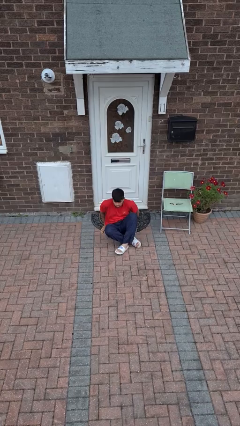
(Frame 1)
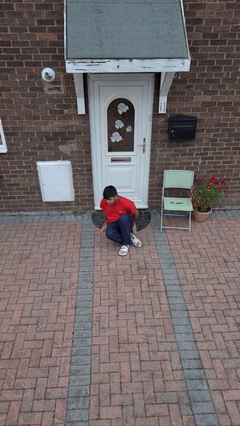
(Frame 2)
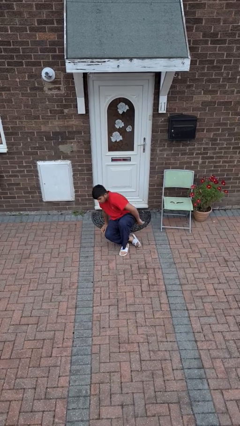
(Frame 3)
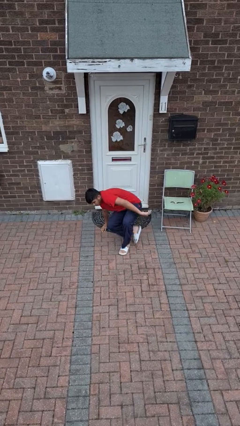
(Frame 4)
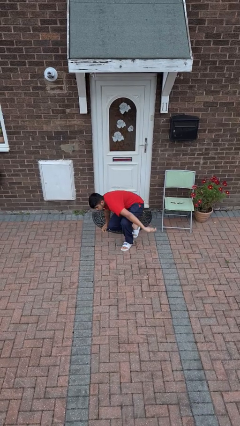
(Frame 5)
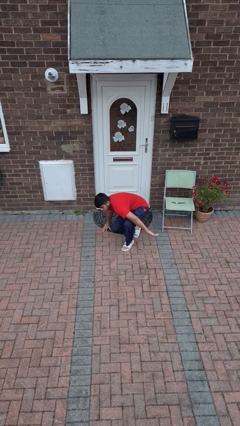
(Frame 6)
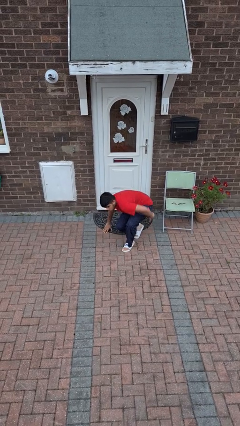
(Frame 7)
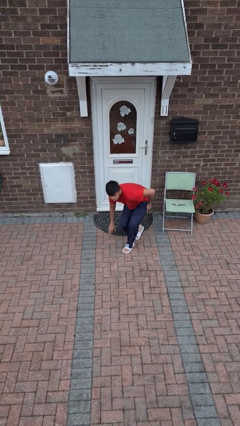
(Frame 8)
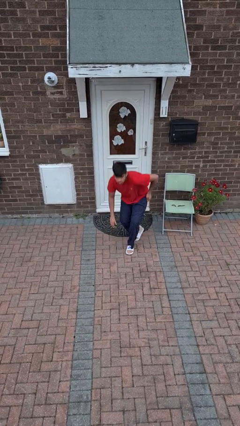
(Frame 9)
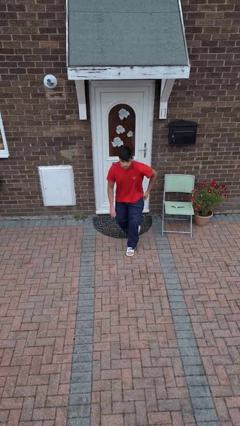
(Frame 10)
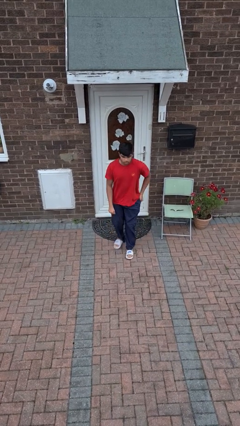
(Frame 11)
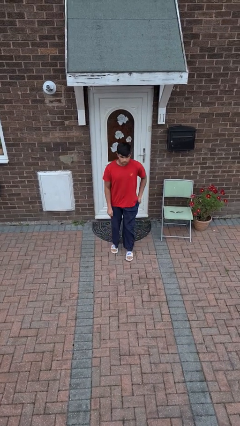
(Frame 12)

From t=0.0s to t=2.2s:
person stands up from floor

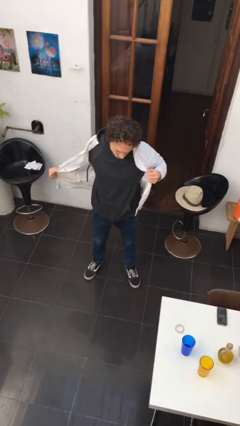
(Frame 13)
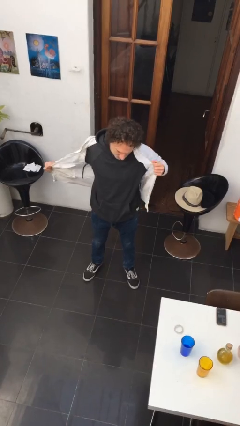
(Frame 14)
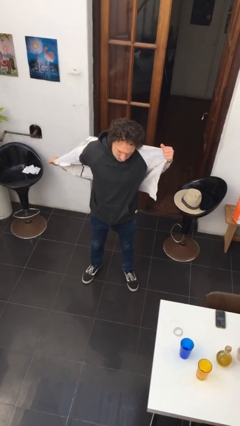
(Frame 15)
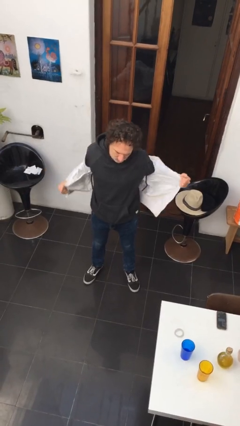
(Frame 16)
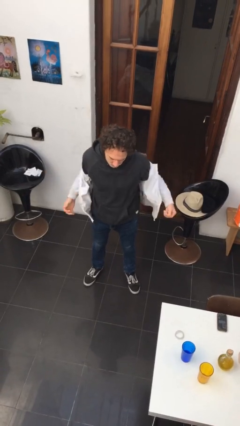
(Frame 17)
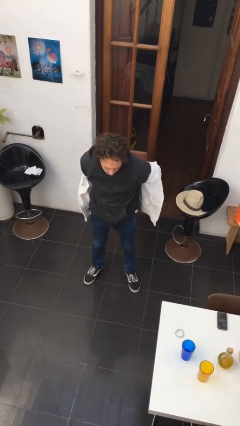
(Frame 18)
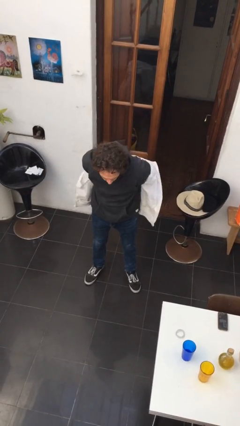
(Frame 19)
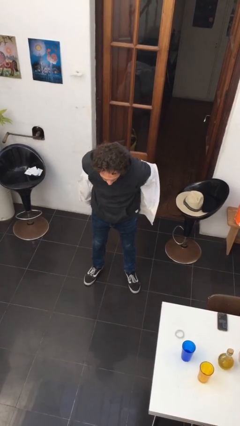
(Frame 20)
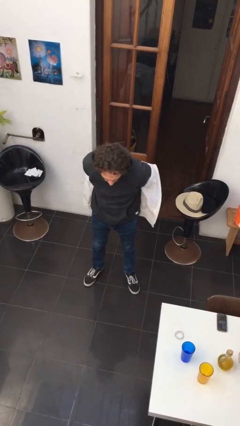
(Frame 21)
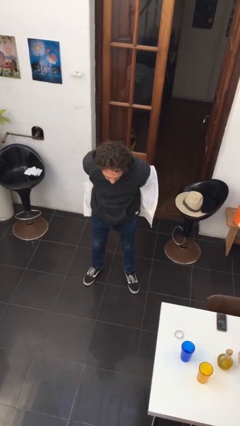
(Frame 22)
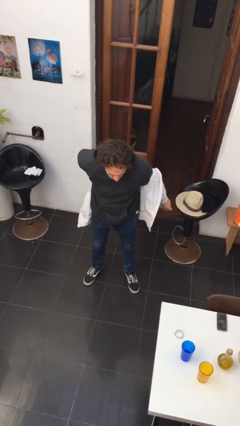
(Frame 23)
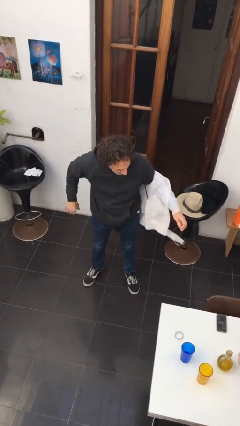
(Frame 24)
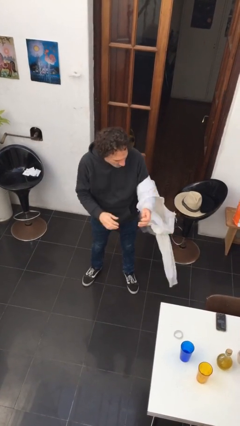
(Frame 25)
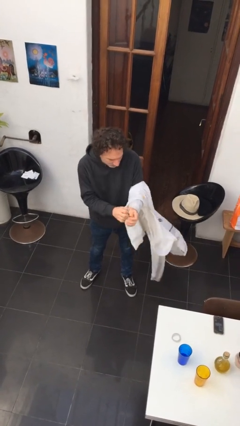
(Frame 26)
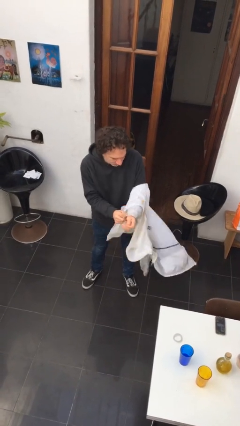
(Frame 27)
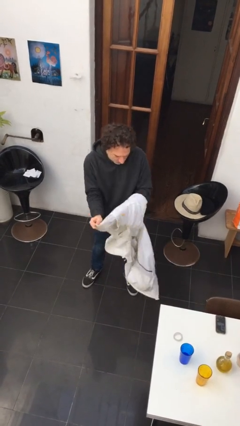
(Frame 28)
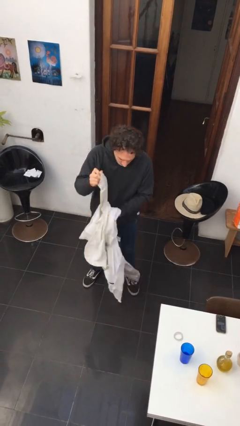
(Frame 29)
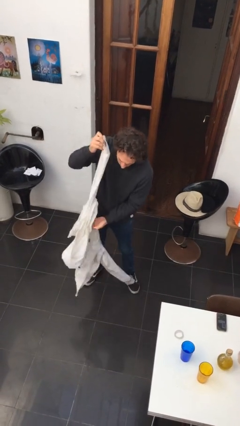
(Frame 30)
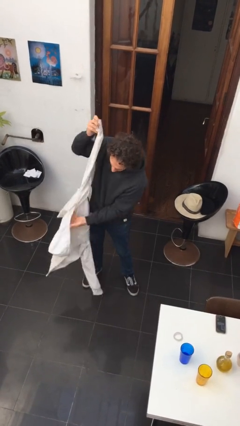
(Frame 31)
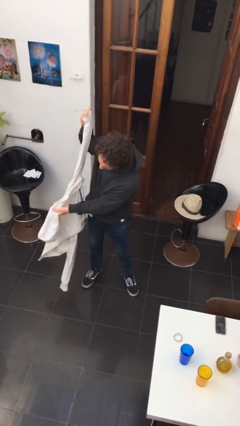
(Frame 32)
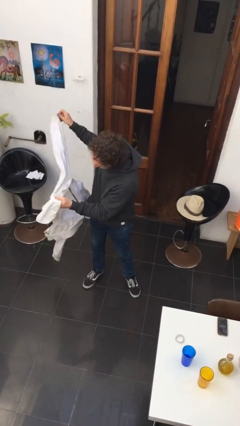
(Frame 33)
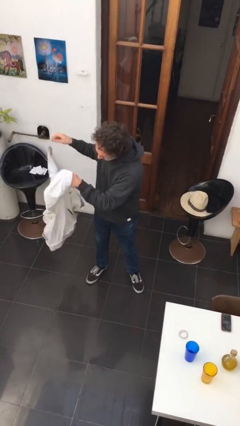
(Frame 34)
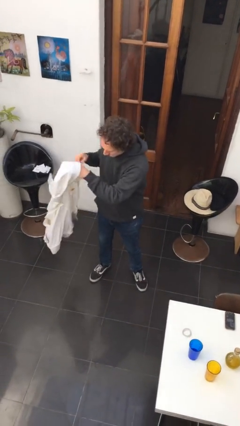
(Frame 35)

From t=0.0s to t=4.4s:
person takes off jacket

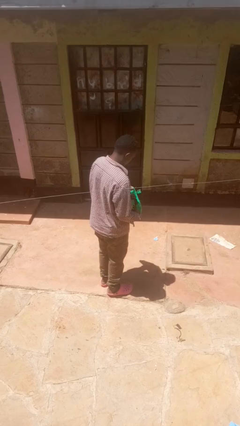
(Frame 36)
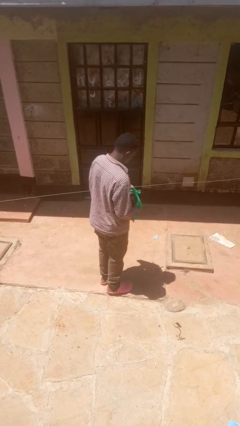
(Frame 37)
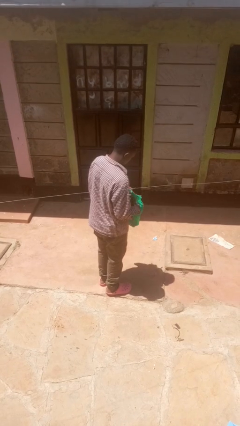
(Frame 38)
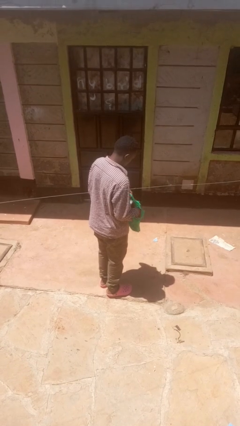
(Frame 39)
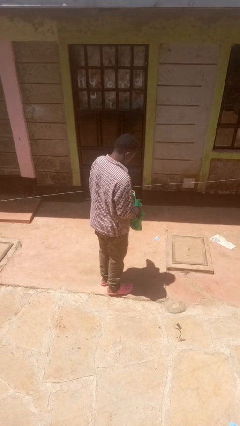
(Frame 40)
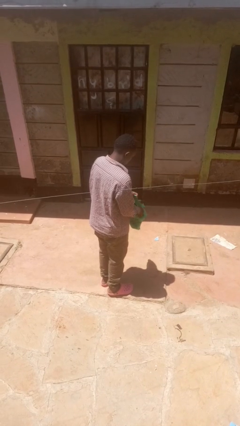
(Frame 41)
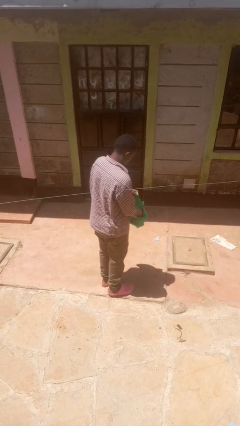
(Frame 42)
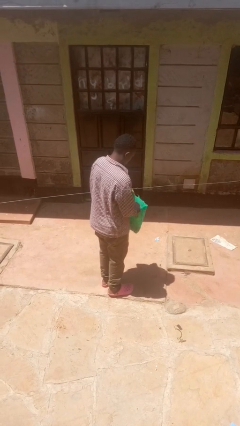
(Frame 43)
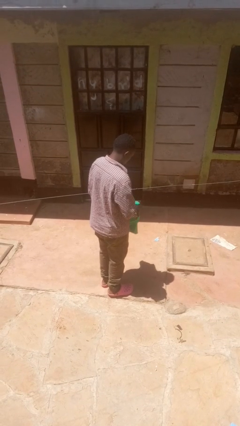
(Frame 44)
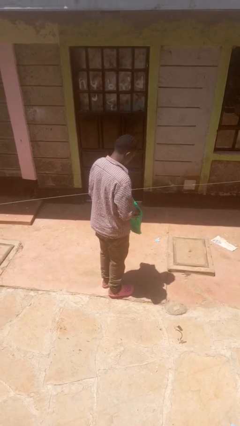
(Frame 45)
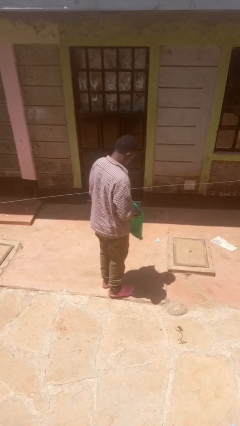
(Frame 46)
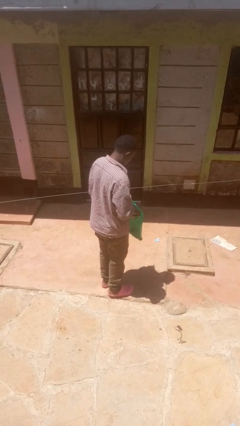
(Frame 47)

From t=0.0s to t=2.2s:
person puts object into bag

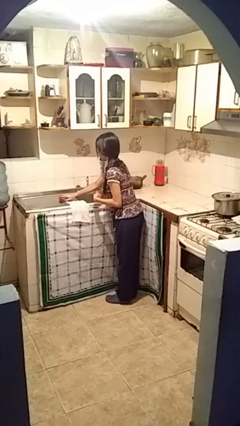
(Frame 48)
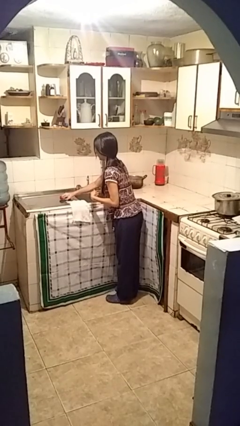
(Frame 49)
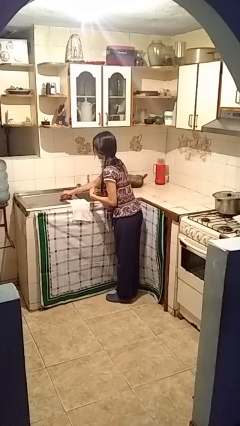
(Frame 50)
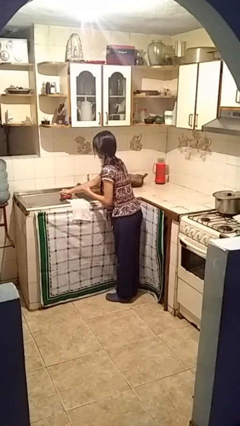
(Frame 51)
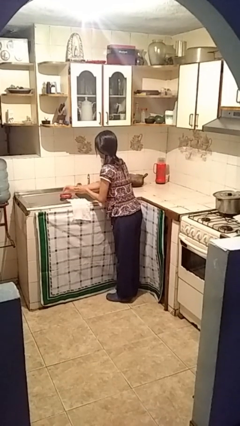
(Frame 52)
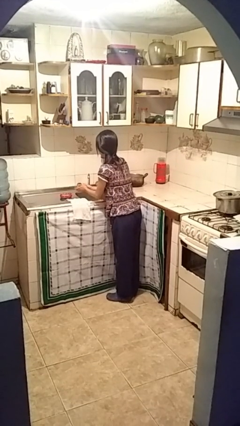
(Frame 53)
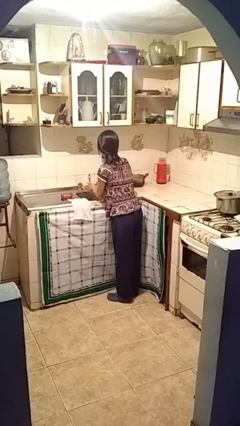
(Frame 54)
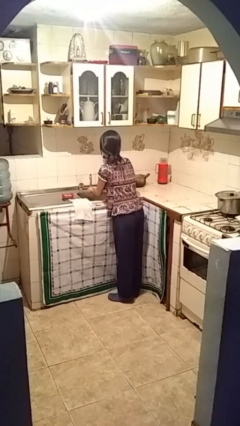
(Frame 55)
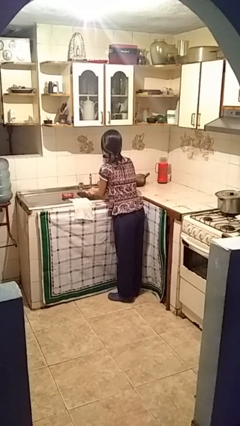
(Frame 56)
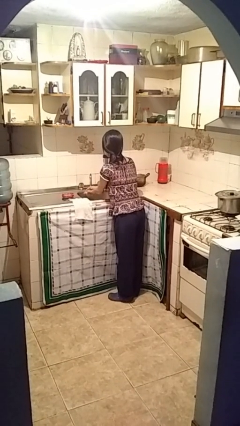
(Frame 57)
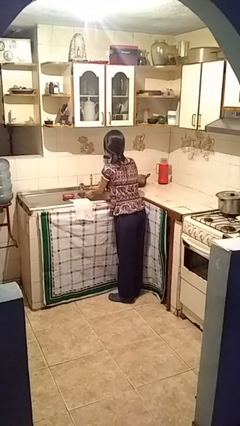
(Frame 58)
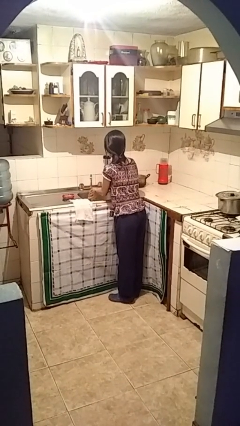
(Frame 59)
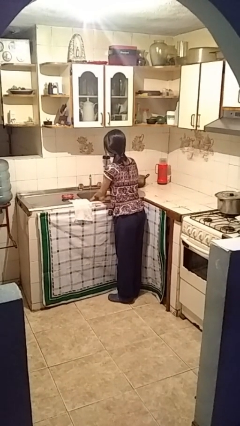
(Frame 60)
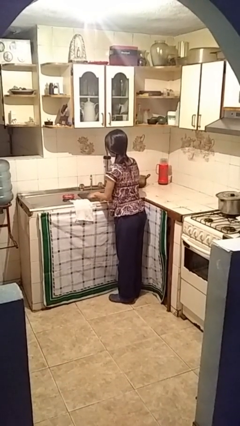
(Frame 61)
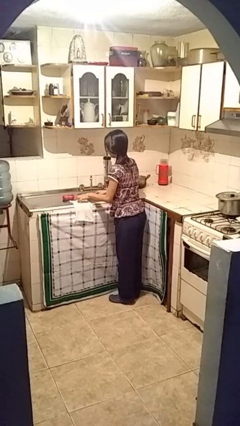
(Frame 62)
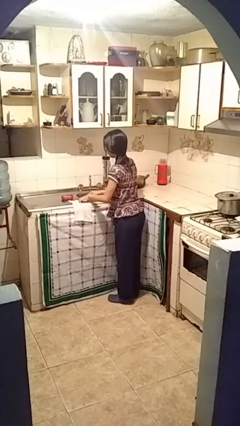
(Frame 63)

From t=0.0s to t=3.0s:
person washes hands

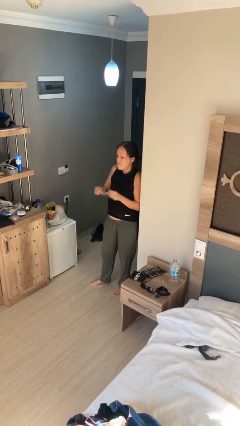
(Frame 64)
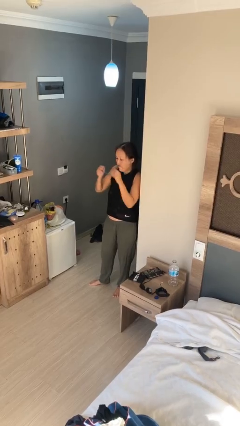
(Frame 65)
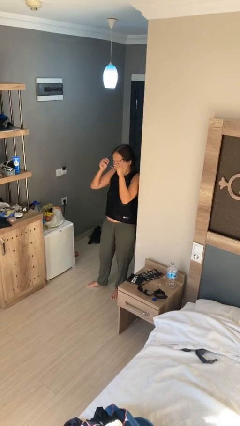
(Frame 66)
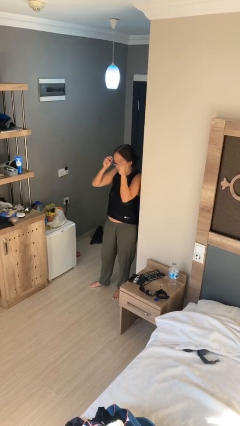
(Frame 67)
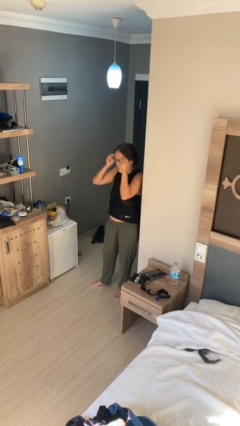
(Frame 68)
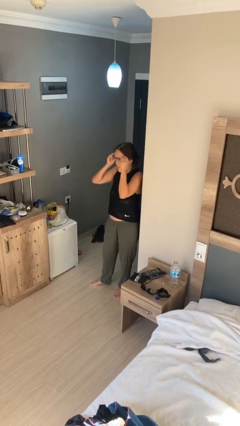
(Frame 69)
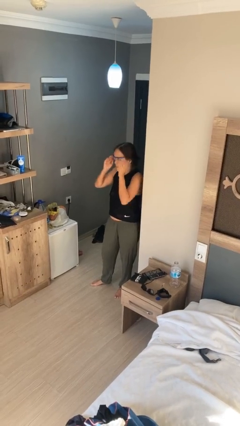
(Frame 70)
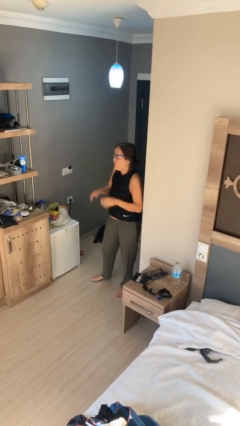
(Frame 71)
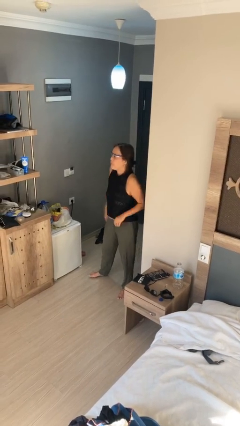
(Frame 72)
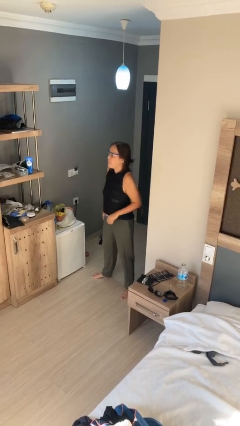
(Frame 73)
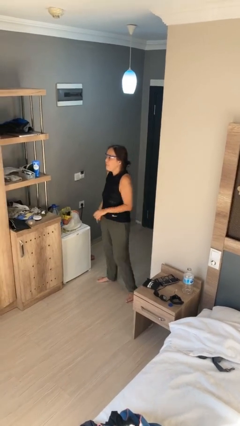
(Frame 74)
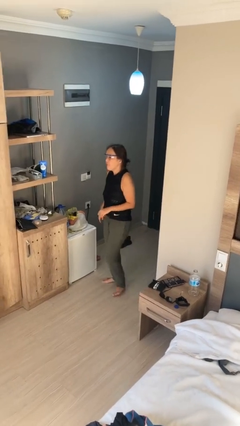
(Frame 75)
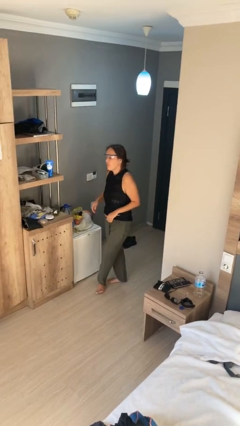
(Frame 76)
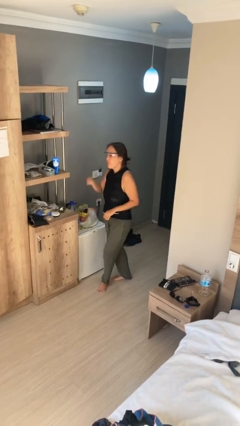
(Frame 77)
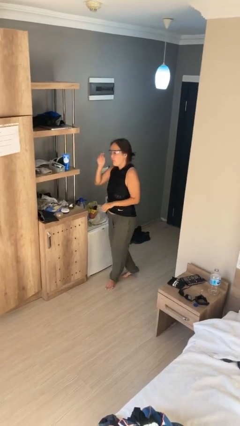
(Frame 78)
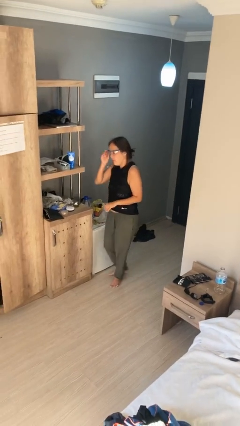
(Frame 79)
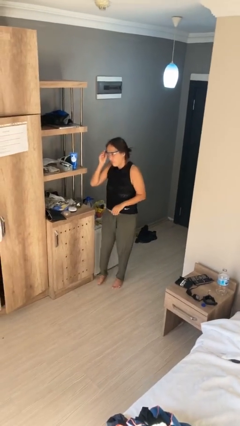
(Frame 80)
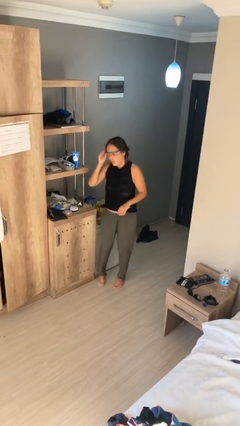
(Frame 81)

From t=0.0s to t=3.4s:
person puts on glasses

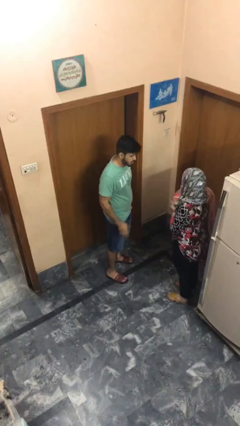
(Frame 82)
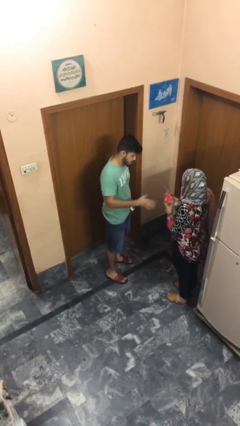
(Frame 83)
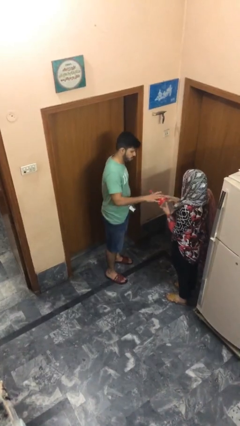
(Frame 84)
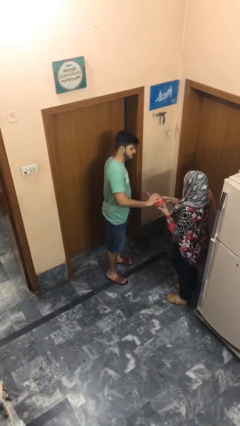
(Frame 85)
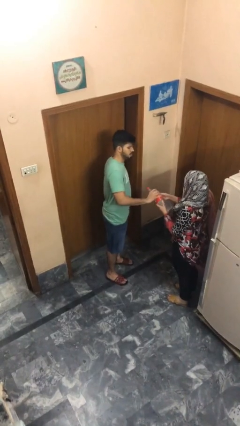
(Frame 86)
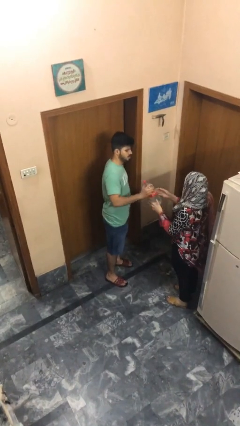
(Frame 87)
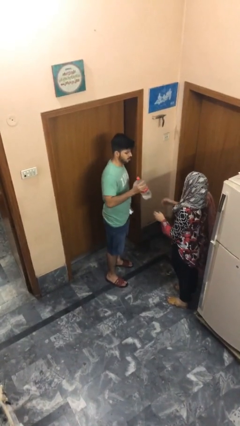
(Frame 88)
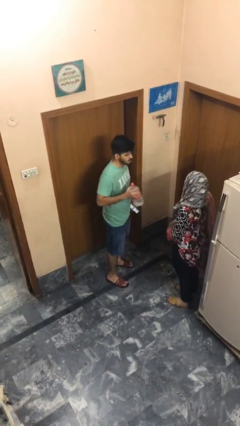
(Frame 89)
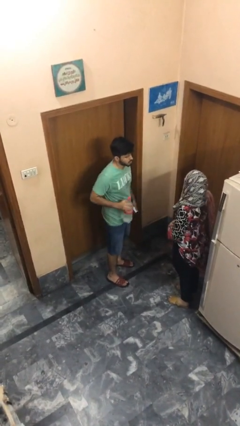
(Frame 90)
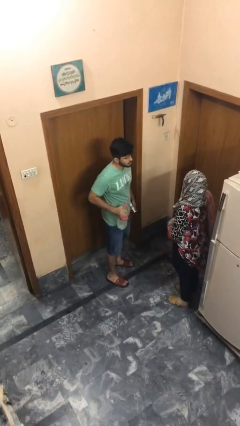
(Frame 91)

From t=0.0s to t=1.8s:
person transfers object to person

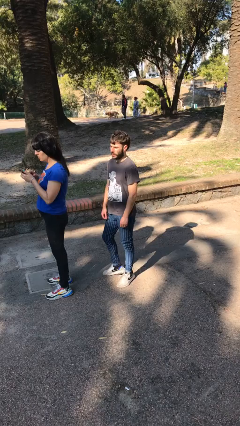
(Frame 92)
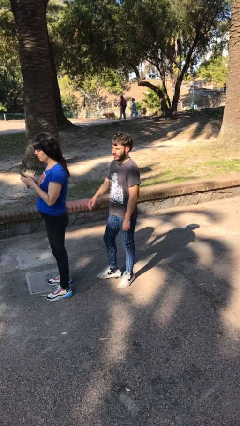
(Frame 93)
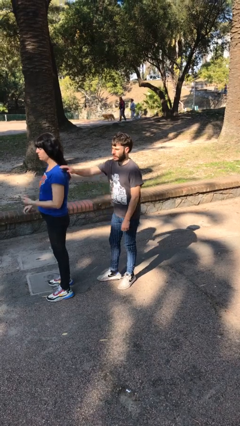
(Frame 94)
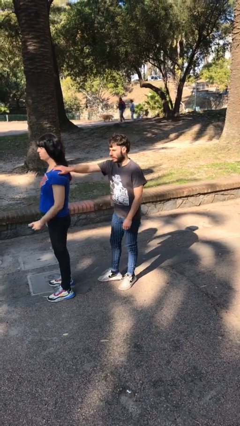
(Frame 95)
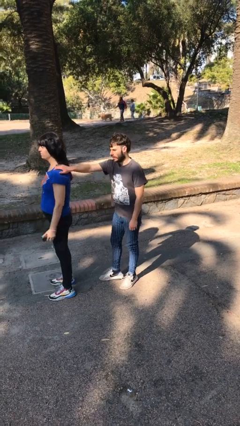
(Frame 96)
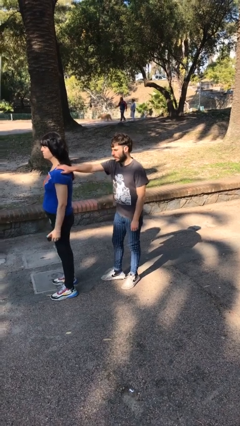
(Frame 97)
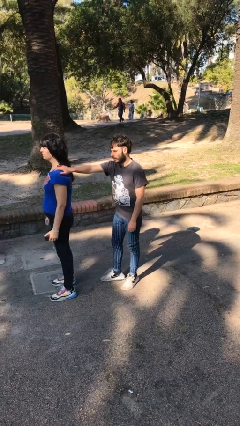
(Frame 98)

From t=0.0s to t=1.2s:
person grabs person by shoulder